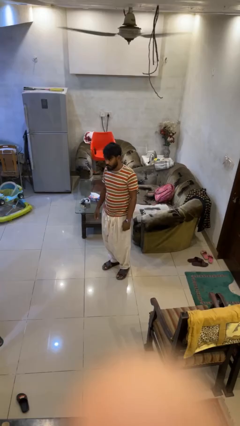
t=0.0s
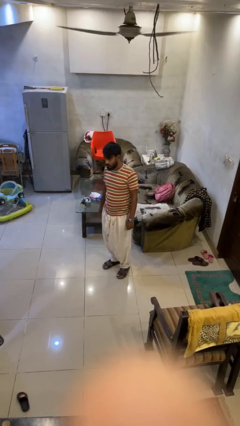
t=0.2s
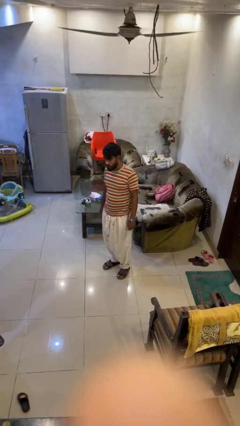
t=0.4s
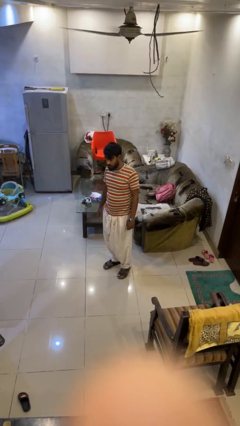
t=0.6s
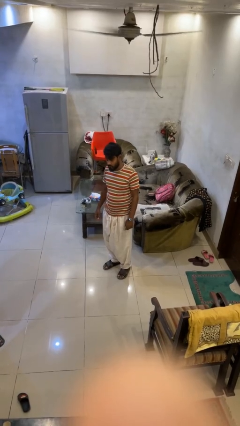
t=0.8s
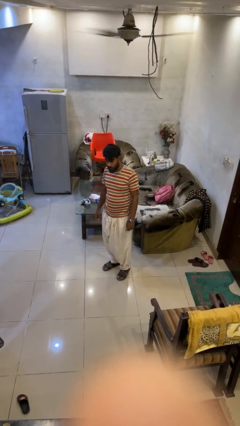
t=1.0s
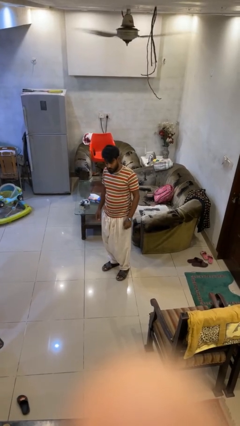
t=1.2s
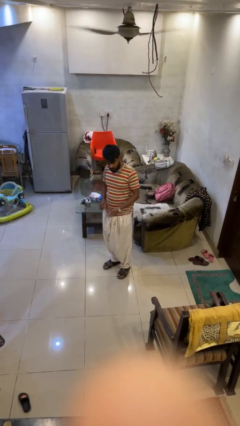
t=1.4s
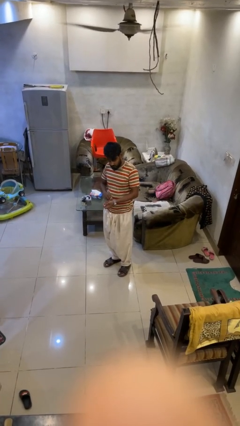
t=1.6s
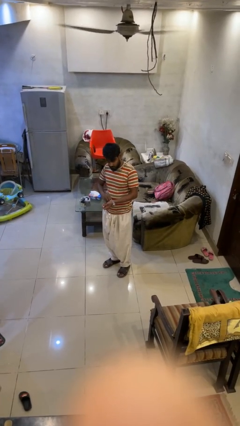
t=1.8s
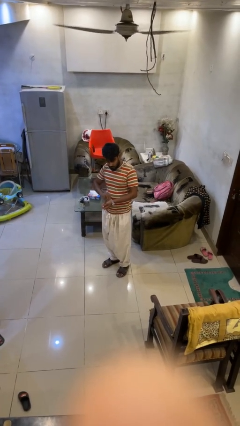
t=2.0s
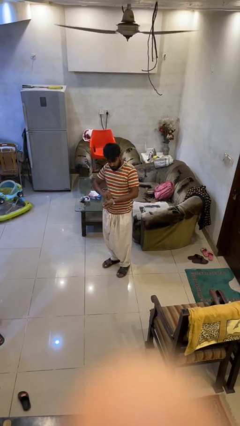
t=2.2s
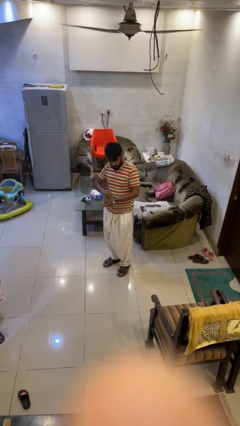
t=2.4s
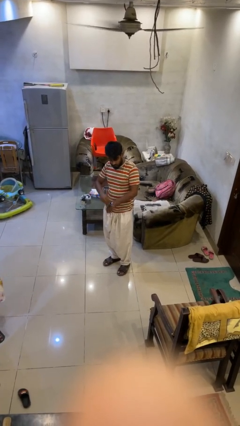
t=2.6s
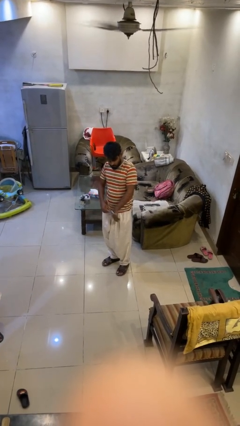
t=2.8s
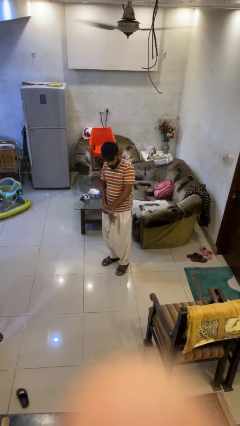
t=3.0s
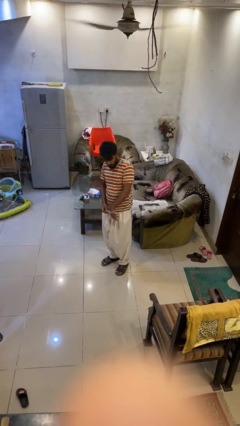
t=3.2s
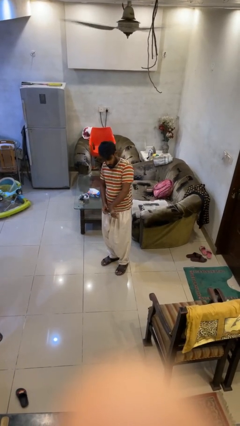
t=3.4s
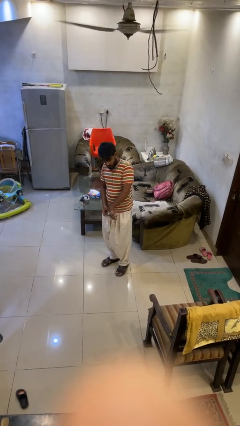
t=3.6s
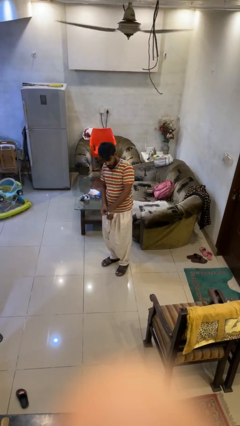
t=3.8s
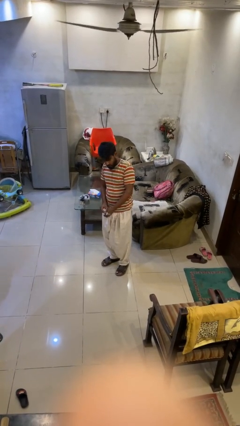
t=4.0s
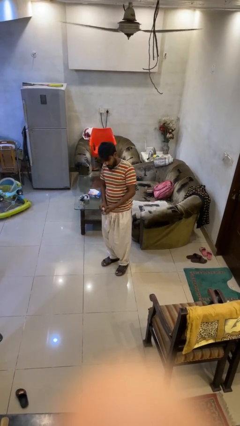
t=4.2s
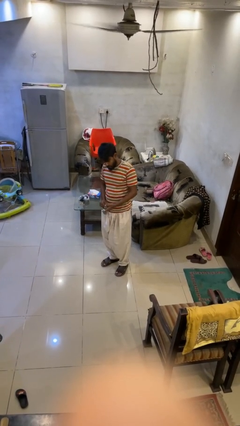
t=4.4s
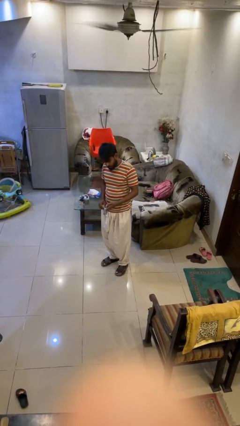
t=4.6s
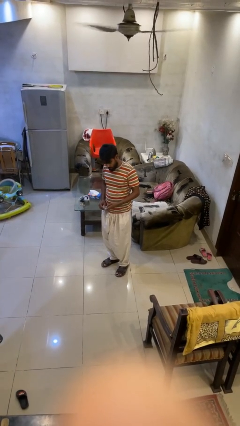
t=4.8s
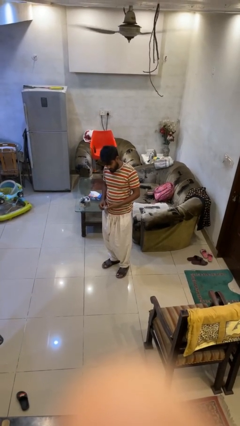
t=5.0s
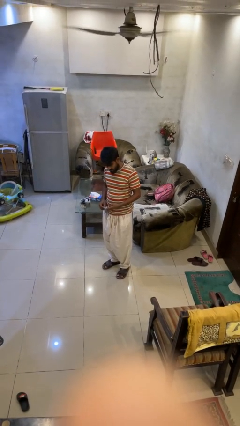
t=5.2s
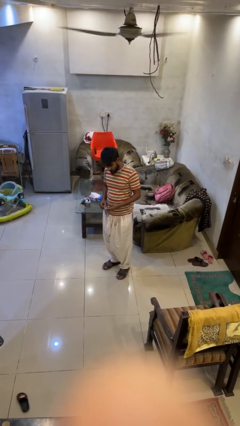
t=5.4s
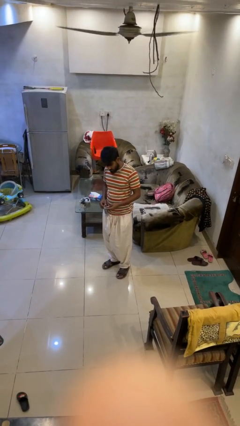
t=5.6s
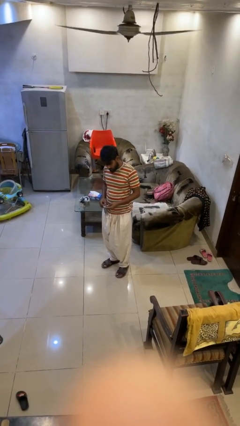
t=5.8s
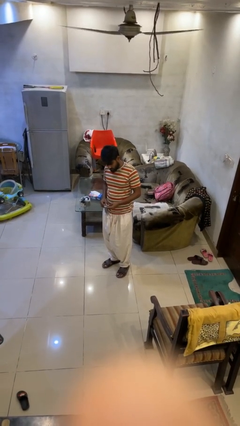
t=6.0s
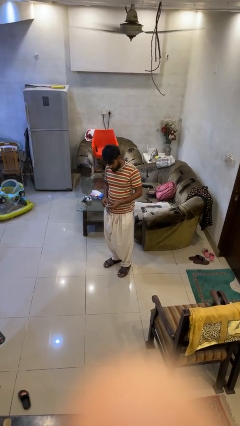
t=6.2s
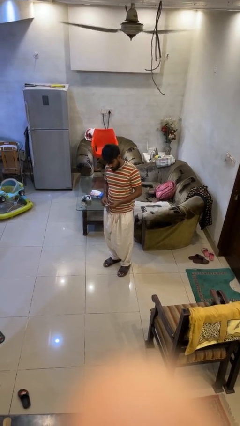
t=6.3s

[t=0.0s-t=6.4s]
person takes off wristwatch

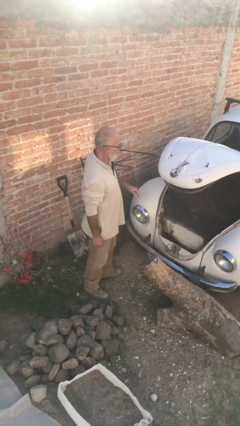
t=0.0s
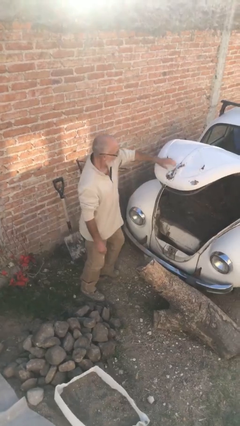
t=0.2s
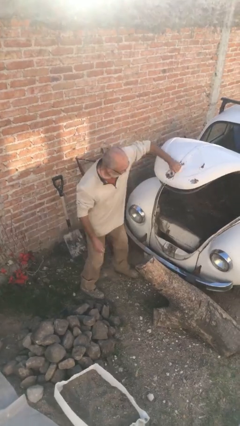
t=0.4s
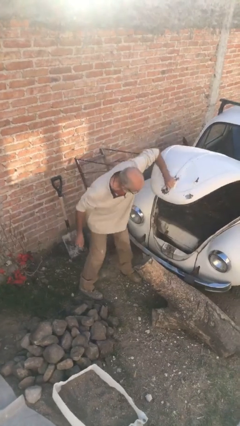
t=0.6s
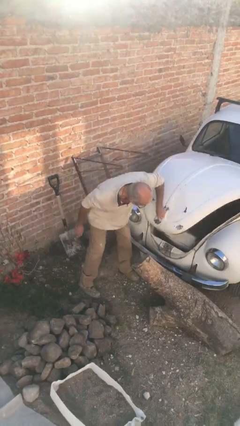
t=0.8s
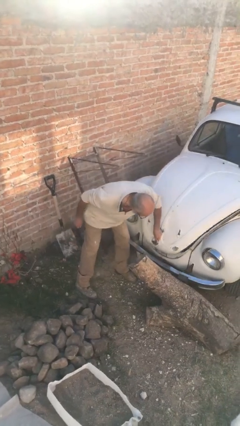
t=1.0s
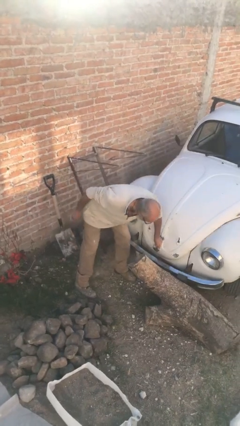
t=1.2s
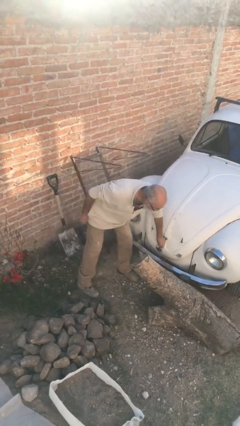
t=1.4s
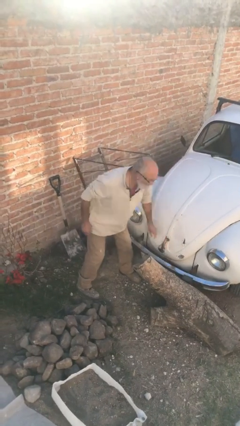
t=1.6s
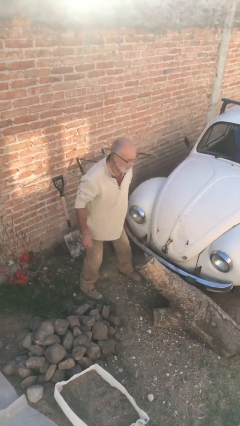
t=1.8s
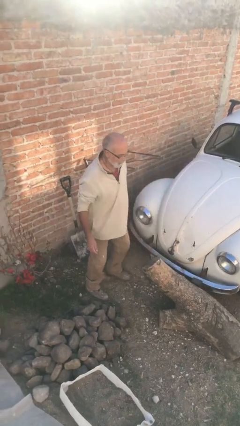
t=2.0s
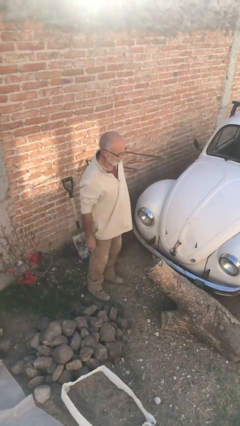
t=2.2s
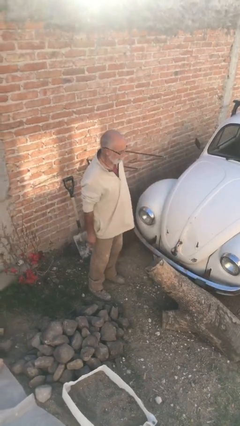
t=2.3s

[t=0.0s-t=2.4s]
person closes car trunk

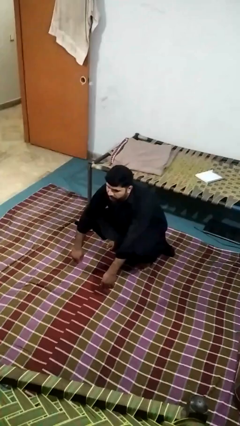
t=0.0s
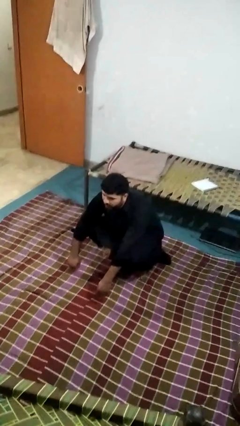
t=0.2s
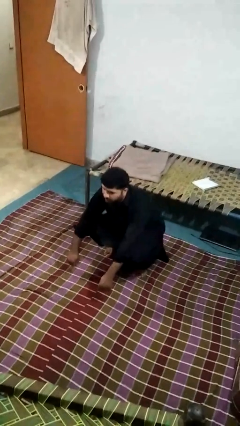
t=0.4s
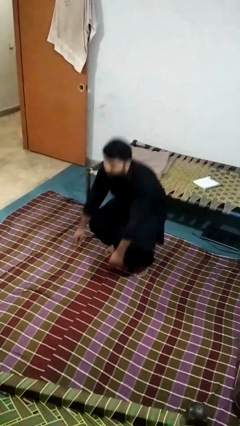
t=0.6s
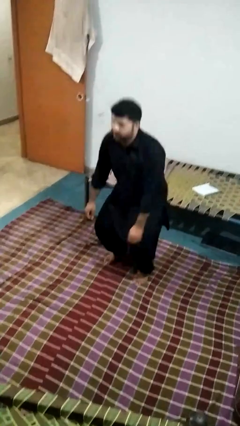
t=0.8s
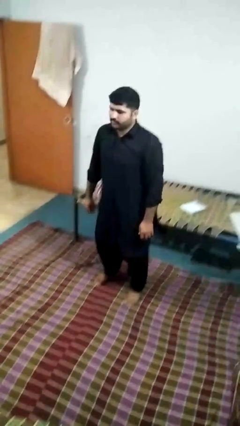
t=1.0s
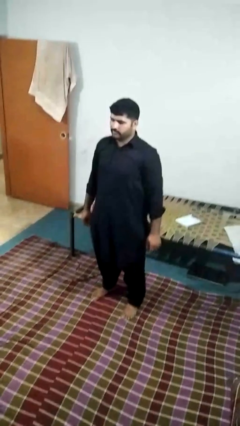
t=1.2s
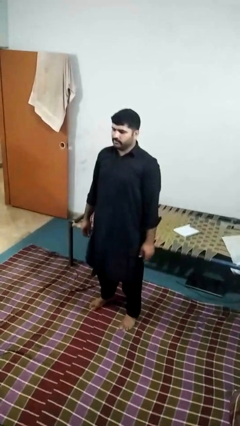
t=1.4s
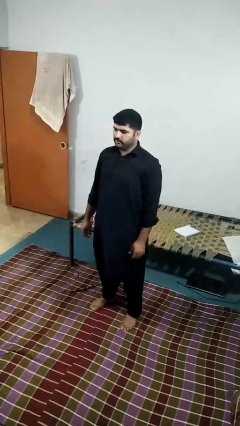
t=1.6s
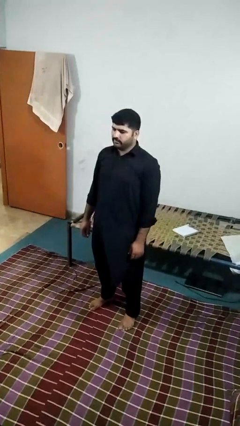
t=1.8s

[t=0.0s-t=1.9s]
person stands up

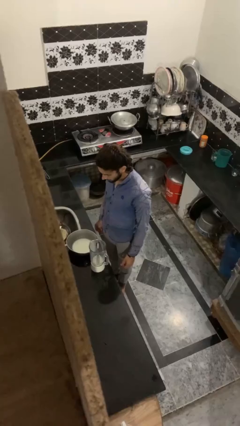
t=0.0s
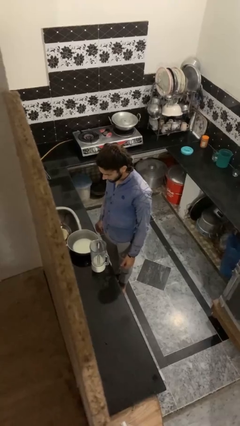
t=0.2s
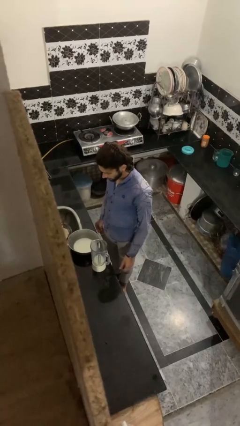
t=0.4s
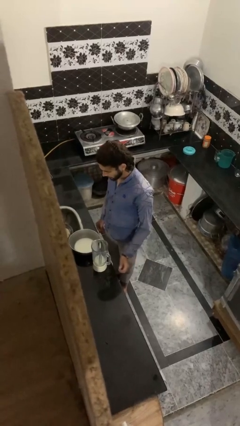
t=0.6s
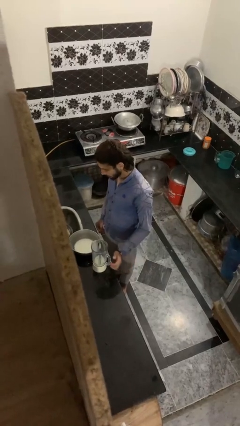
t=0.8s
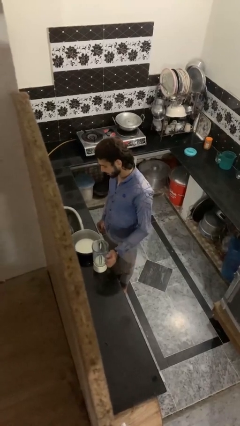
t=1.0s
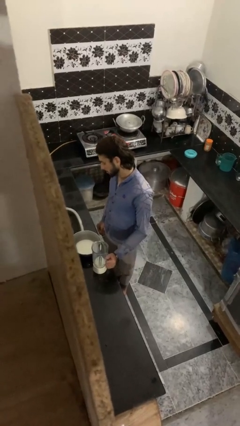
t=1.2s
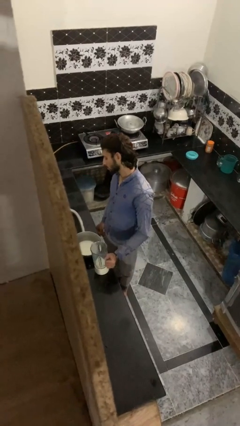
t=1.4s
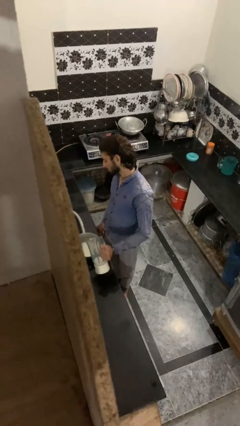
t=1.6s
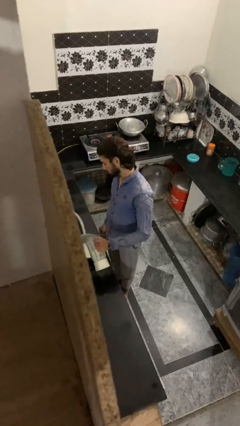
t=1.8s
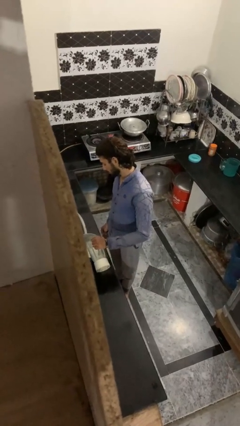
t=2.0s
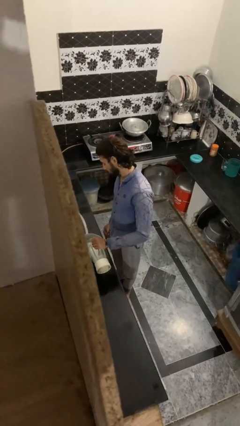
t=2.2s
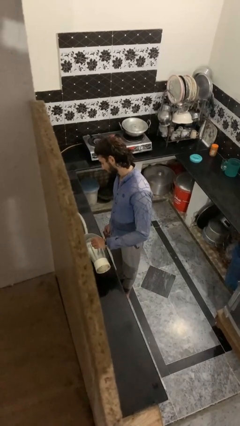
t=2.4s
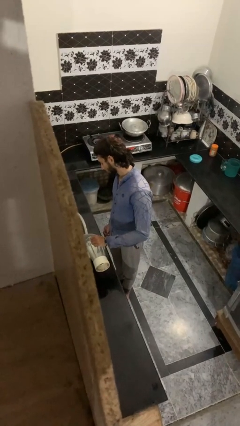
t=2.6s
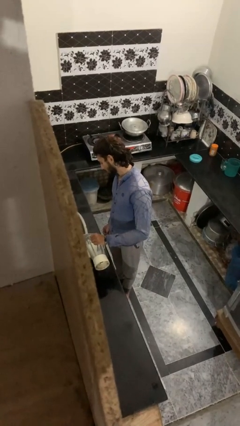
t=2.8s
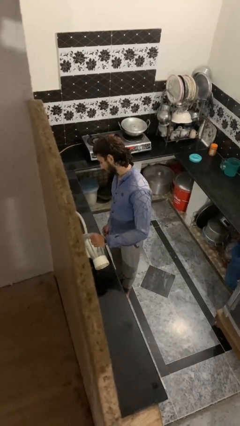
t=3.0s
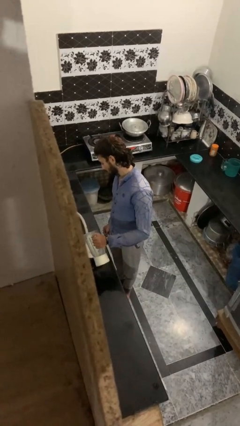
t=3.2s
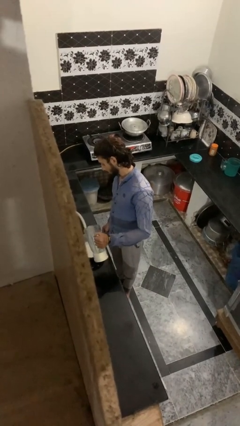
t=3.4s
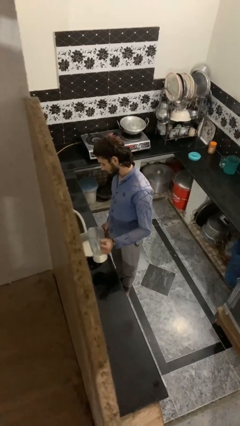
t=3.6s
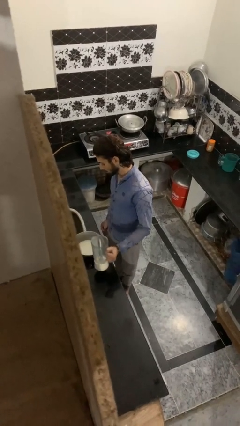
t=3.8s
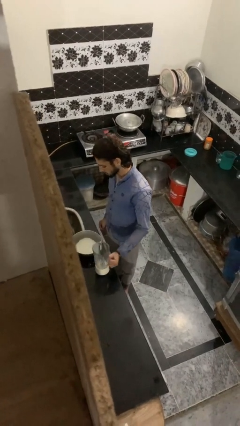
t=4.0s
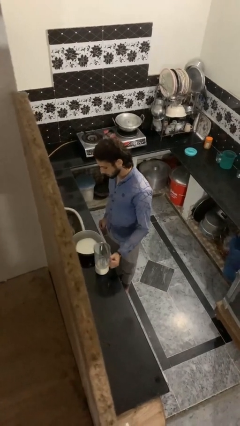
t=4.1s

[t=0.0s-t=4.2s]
person pours into bowl

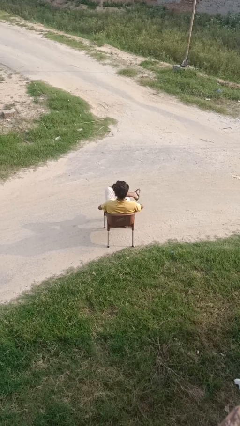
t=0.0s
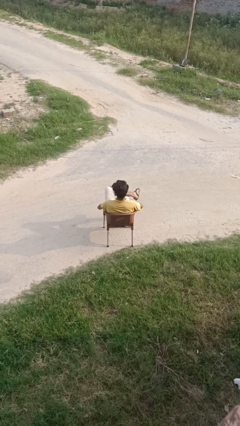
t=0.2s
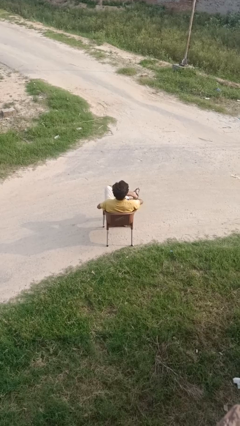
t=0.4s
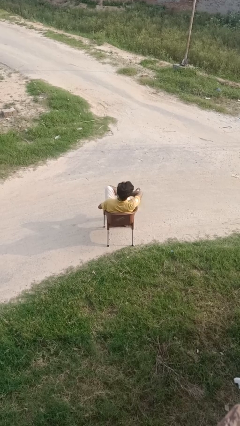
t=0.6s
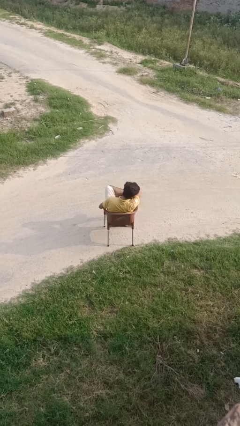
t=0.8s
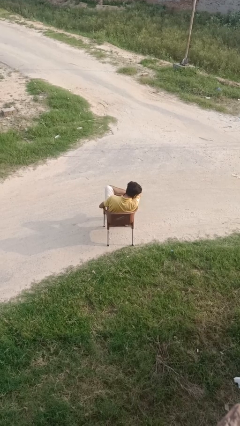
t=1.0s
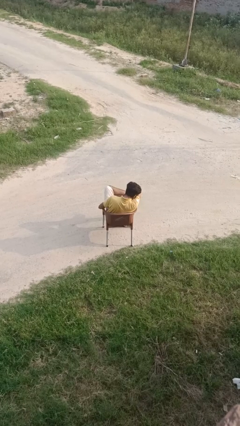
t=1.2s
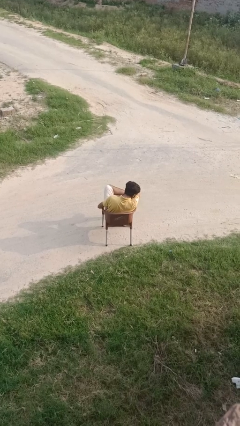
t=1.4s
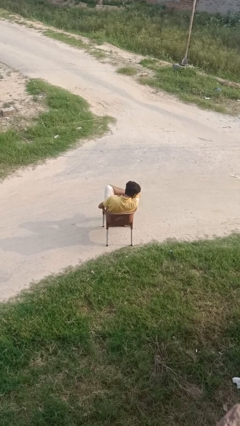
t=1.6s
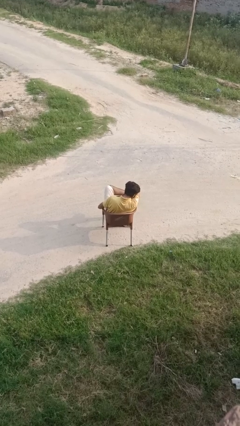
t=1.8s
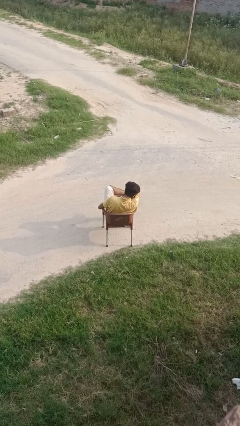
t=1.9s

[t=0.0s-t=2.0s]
person sneezes into arm

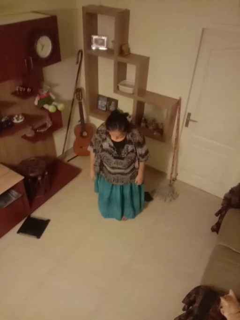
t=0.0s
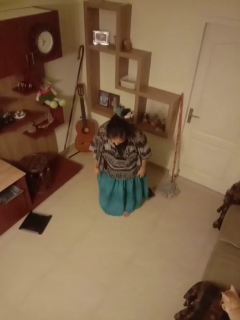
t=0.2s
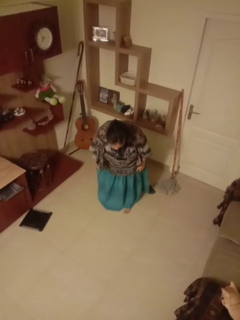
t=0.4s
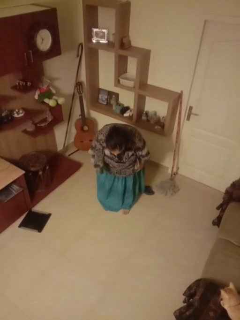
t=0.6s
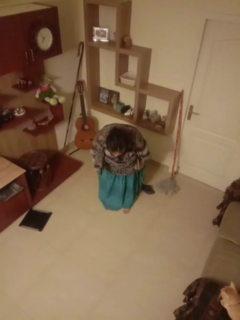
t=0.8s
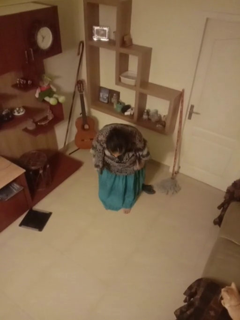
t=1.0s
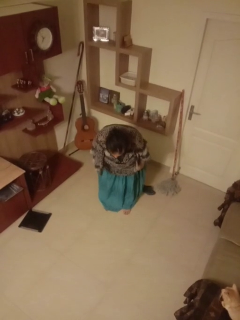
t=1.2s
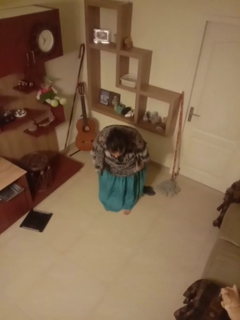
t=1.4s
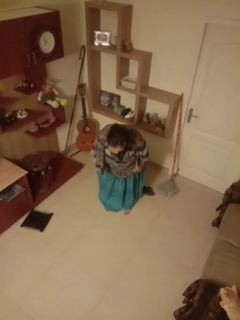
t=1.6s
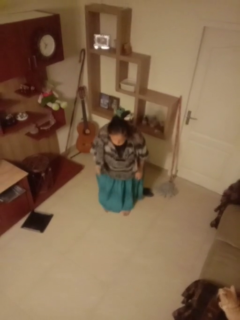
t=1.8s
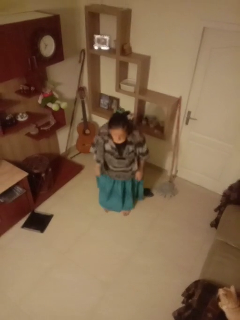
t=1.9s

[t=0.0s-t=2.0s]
person bows
